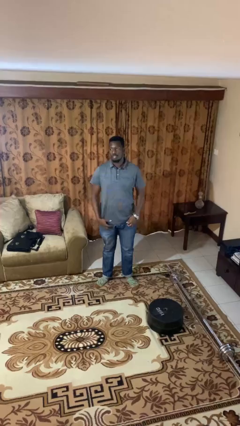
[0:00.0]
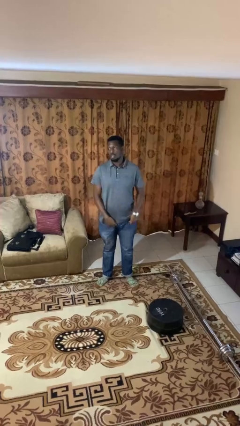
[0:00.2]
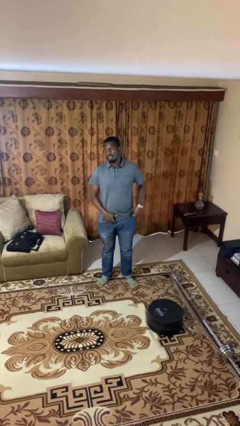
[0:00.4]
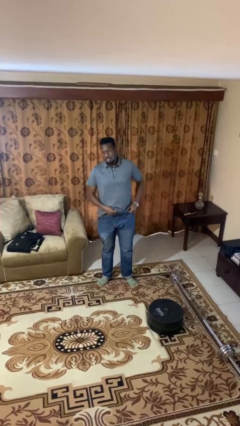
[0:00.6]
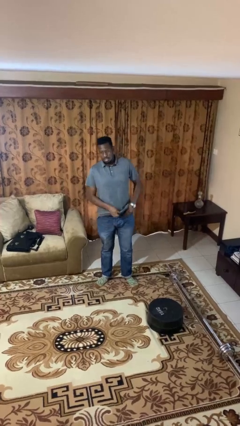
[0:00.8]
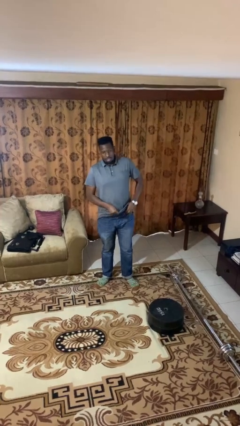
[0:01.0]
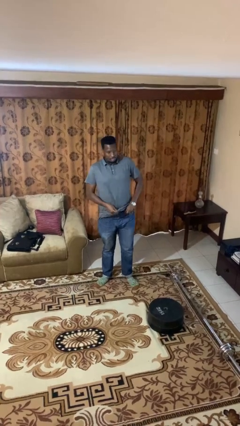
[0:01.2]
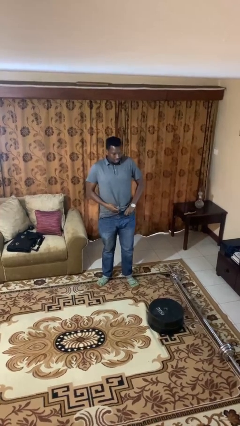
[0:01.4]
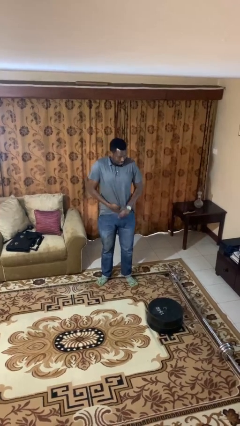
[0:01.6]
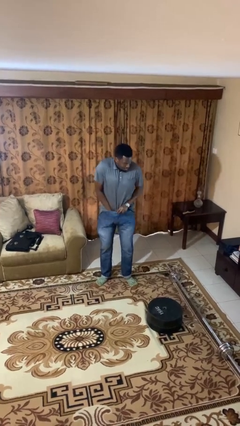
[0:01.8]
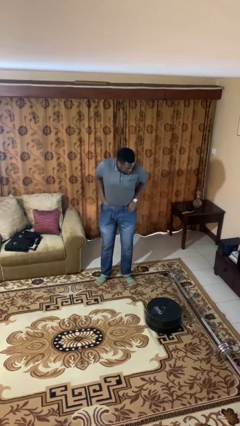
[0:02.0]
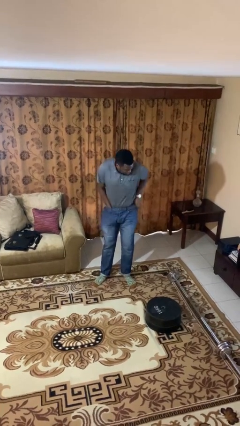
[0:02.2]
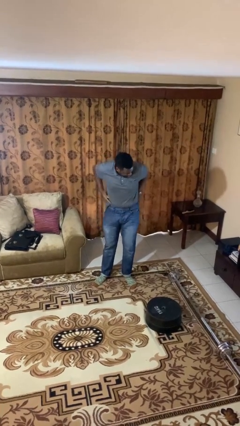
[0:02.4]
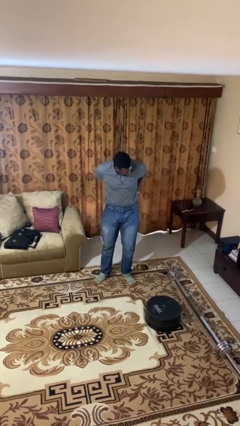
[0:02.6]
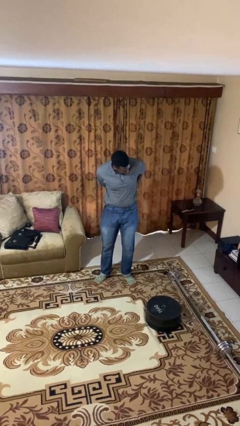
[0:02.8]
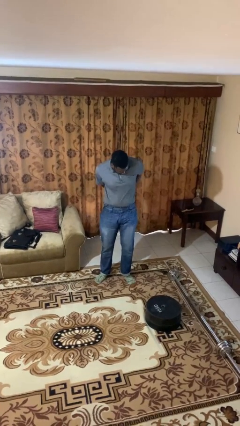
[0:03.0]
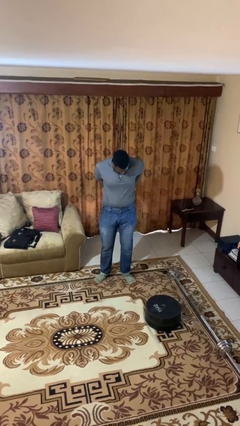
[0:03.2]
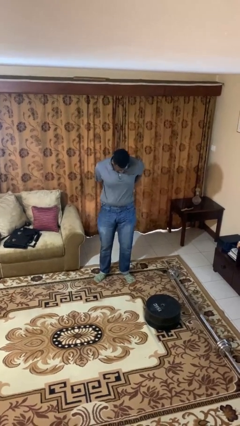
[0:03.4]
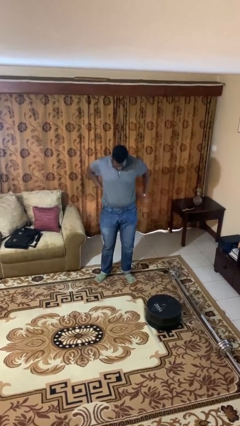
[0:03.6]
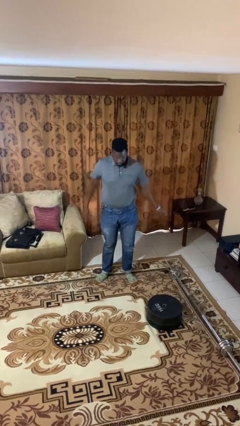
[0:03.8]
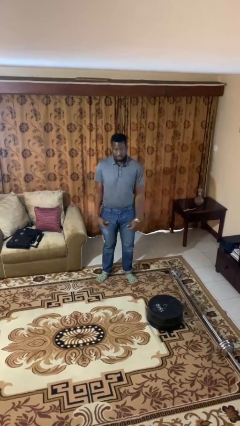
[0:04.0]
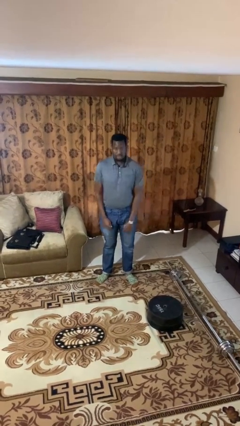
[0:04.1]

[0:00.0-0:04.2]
person tucks in shirt

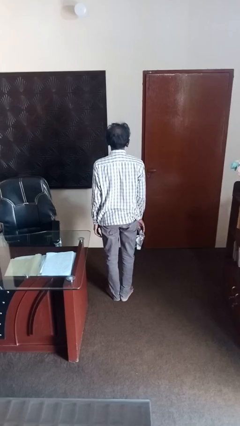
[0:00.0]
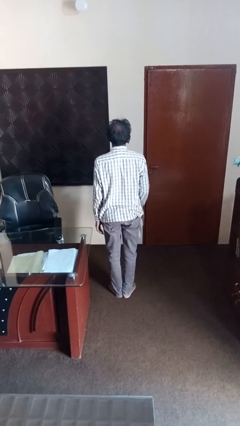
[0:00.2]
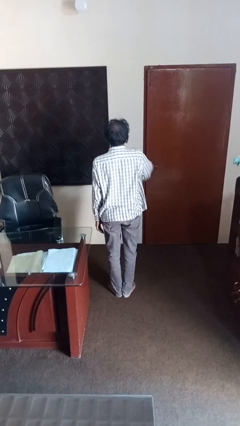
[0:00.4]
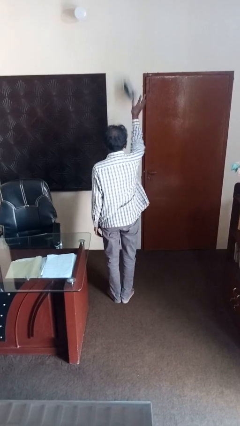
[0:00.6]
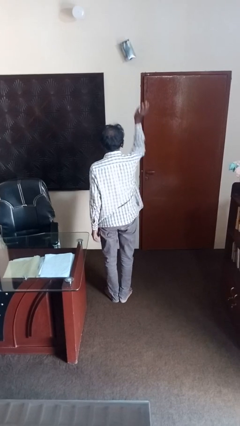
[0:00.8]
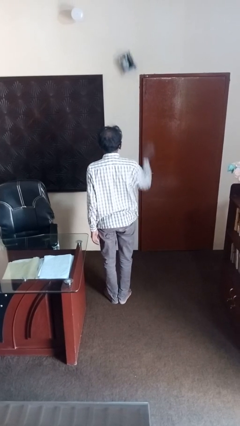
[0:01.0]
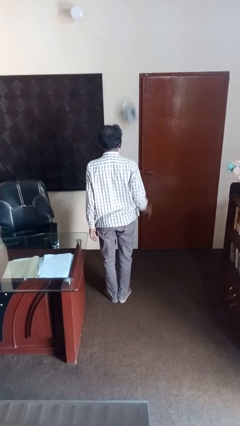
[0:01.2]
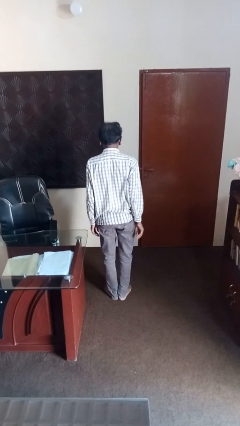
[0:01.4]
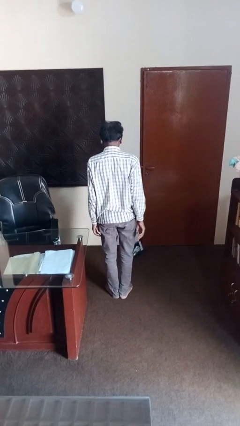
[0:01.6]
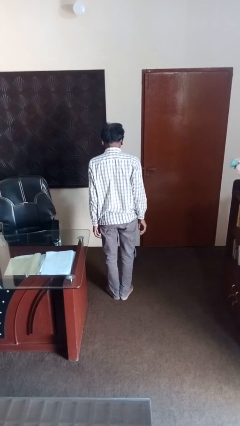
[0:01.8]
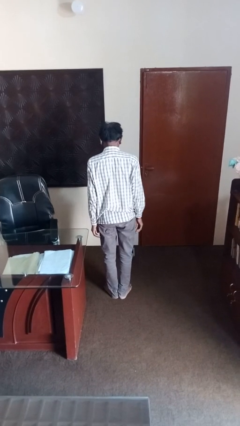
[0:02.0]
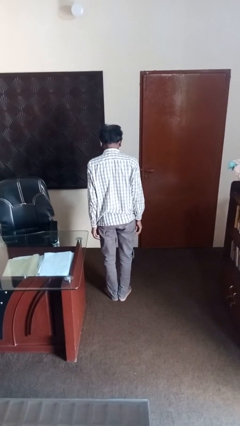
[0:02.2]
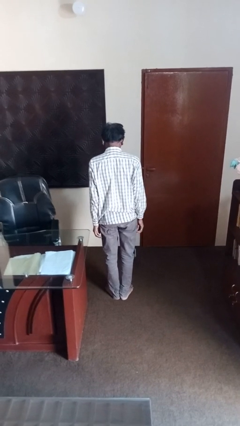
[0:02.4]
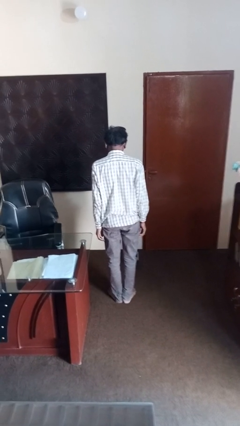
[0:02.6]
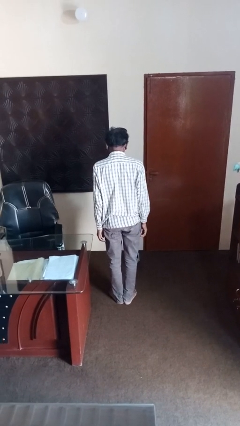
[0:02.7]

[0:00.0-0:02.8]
person throws object into air

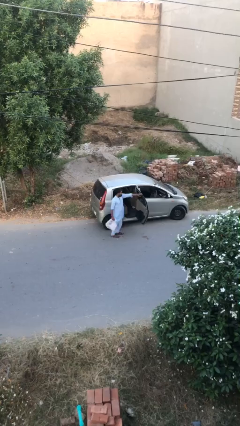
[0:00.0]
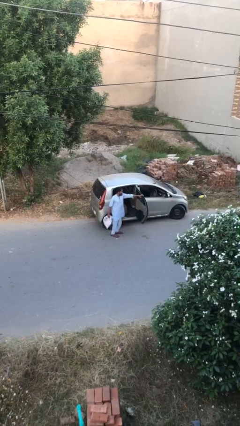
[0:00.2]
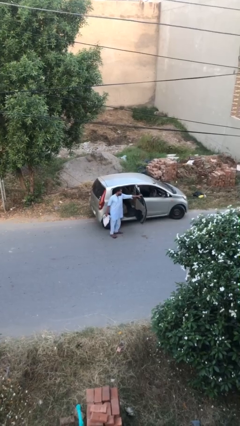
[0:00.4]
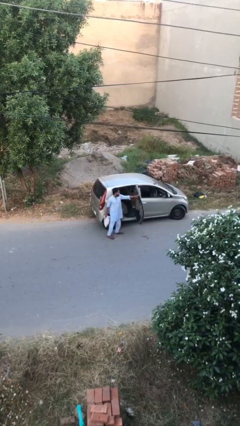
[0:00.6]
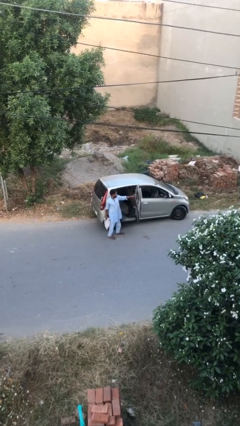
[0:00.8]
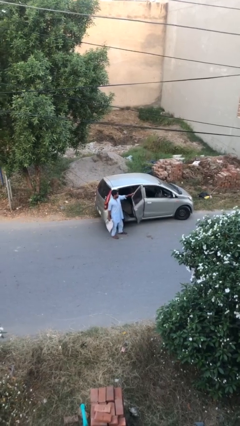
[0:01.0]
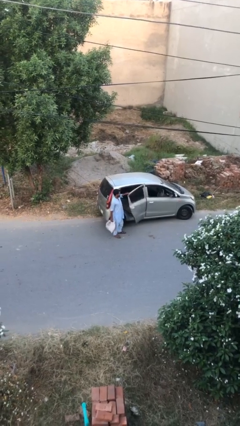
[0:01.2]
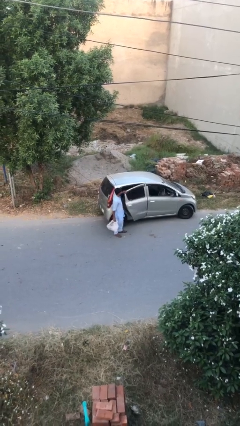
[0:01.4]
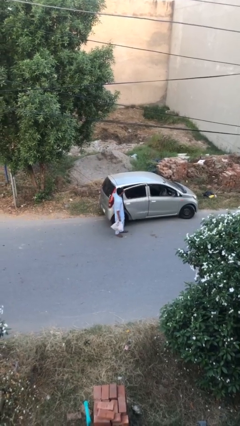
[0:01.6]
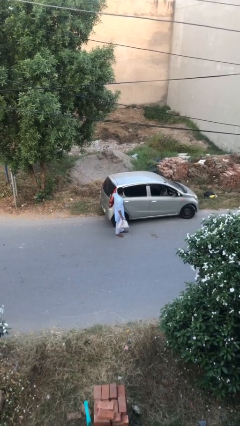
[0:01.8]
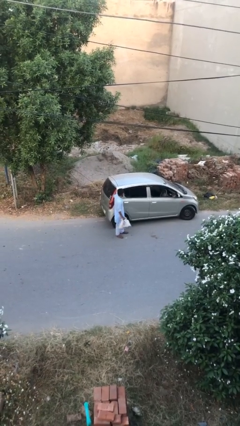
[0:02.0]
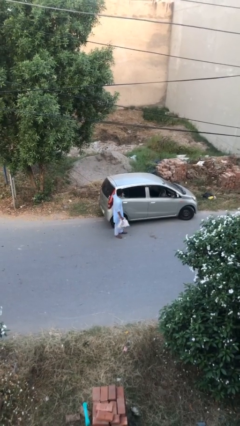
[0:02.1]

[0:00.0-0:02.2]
person closes car door

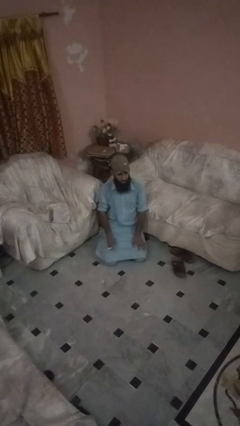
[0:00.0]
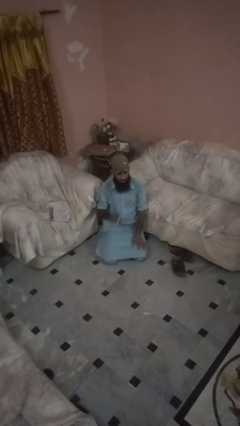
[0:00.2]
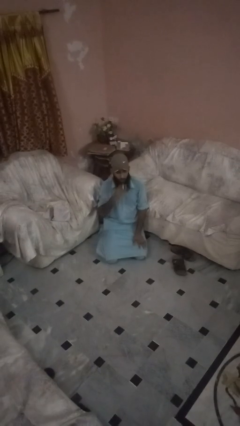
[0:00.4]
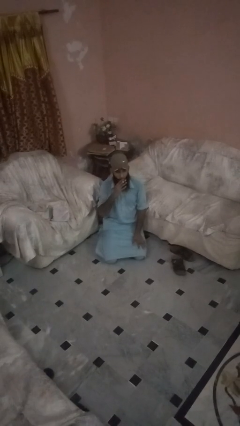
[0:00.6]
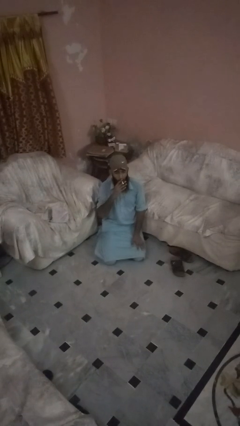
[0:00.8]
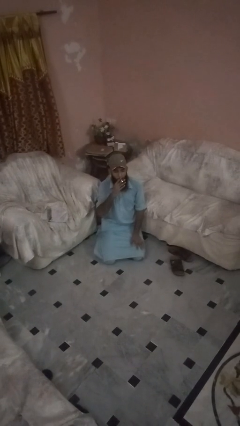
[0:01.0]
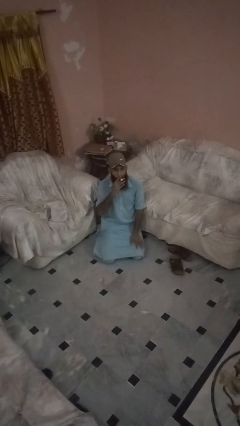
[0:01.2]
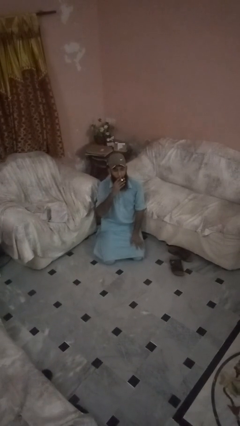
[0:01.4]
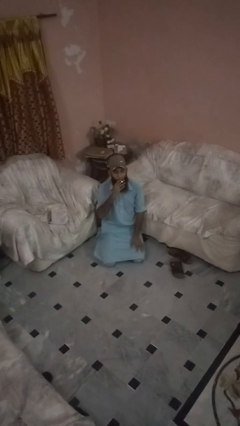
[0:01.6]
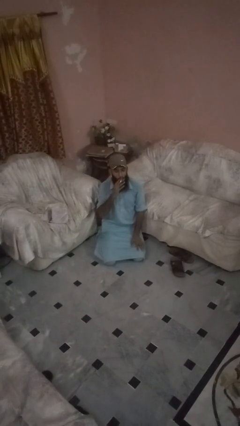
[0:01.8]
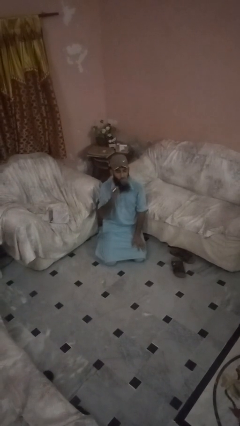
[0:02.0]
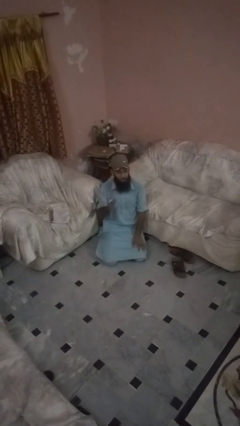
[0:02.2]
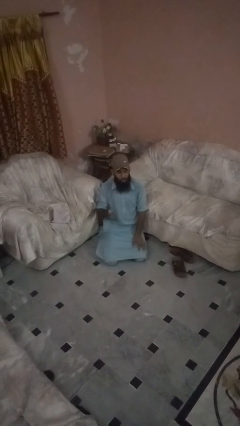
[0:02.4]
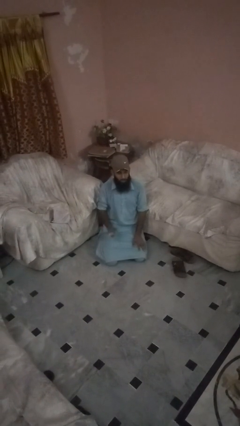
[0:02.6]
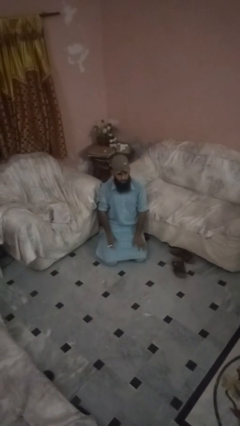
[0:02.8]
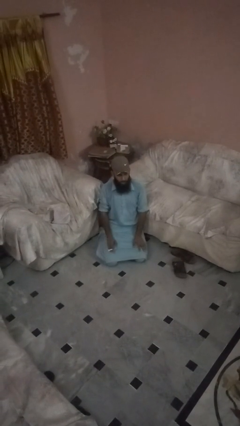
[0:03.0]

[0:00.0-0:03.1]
person vapes

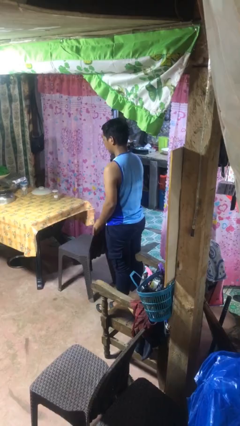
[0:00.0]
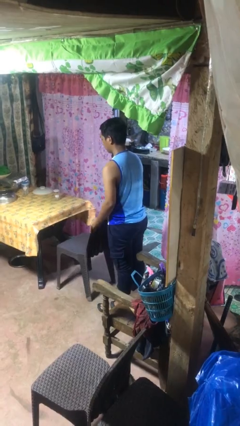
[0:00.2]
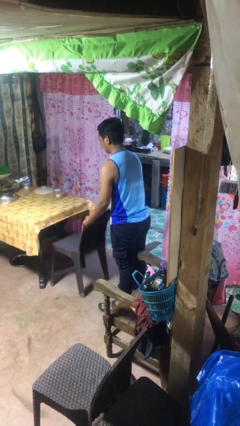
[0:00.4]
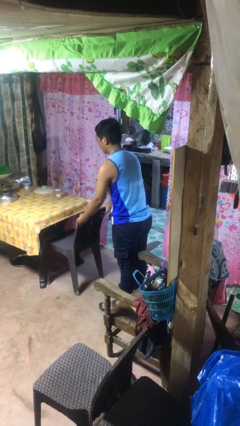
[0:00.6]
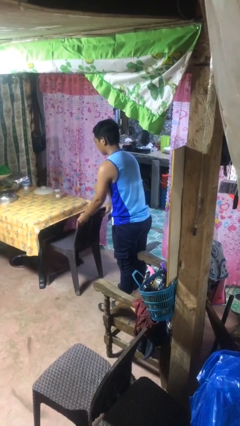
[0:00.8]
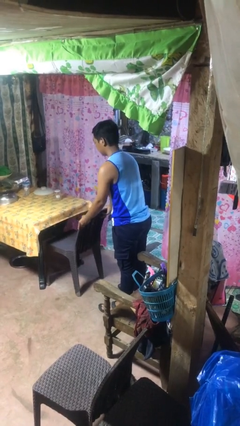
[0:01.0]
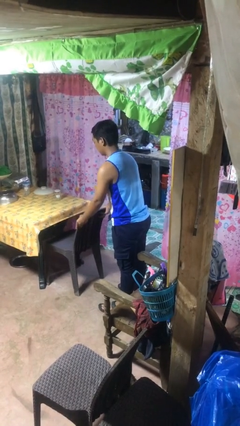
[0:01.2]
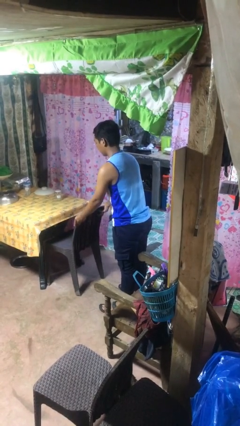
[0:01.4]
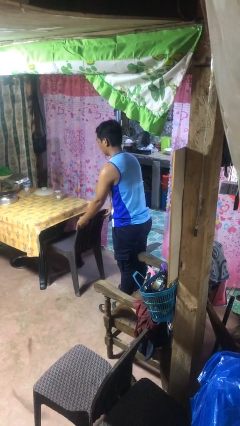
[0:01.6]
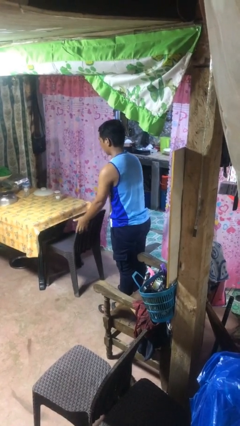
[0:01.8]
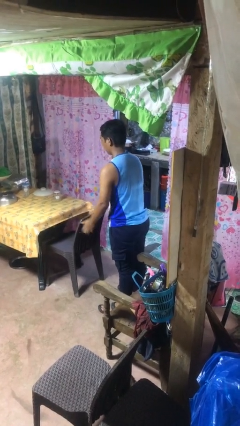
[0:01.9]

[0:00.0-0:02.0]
person pushes in chair

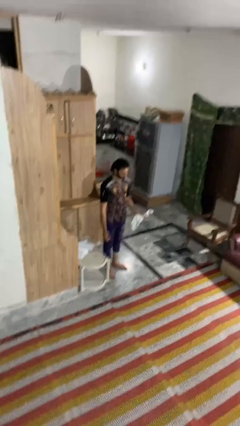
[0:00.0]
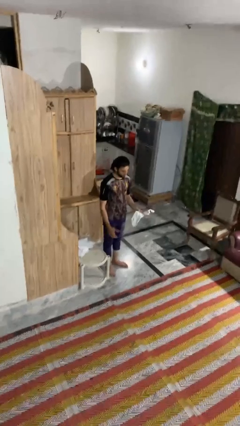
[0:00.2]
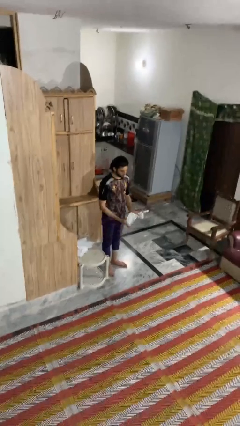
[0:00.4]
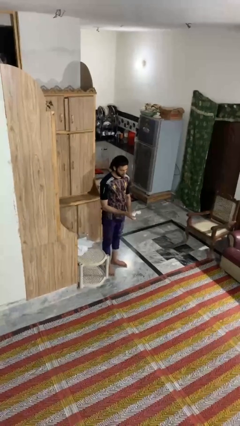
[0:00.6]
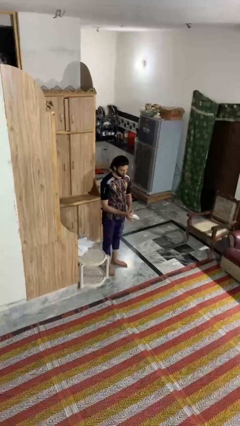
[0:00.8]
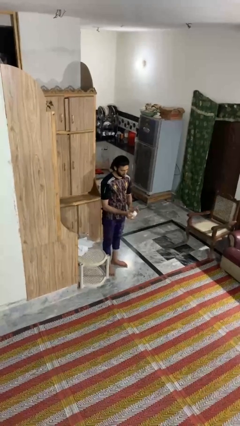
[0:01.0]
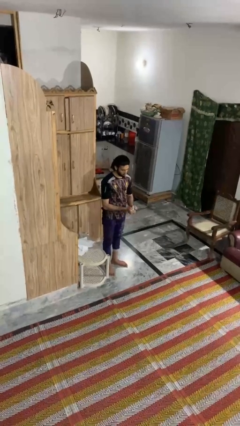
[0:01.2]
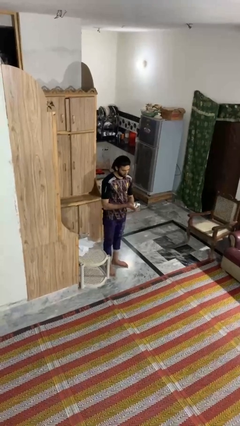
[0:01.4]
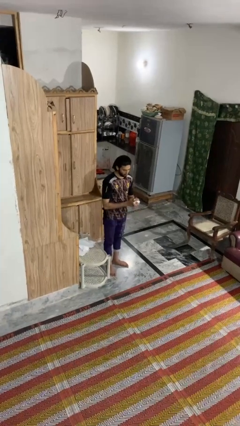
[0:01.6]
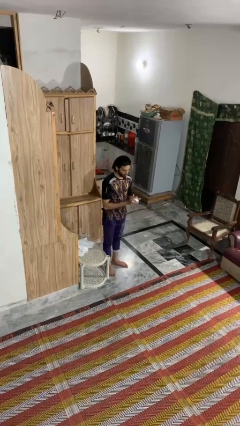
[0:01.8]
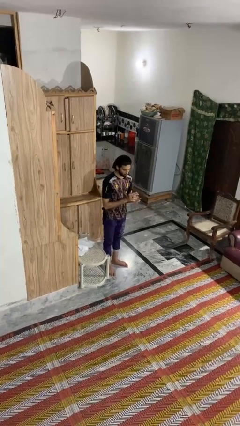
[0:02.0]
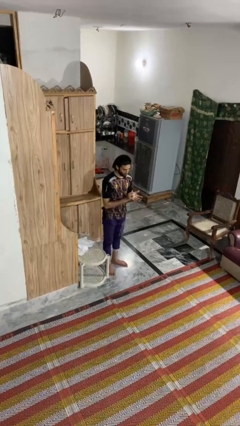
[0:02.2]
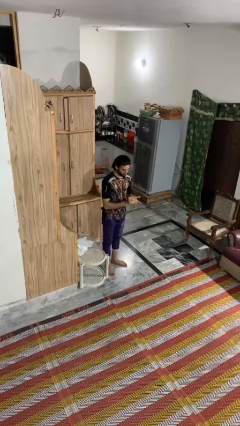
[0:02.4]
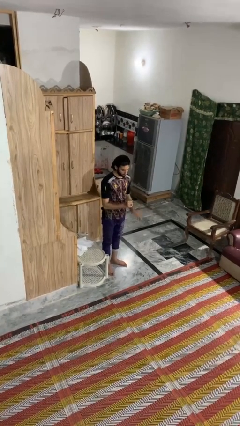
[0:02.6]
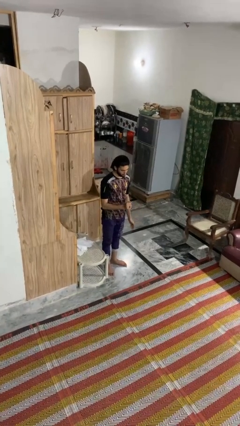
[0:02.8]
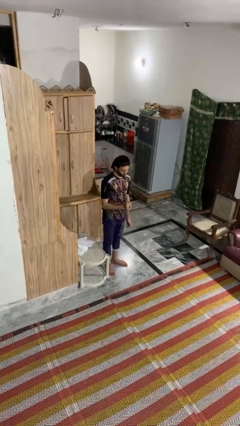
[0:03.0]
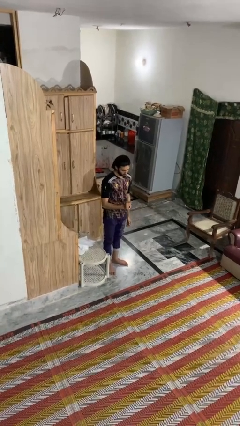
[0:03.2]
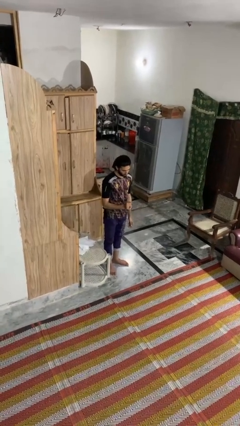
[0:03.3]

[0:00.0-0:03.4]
person crumples paper
